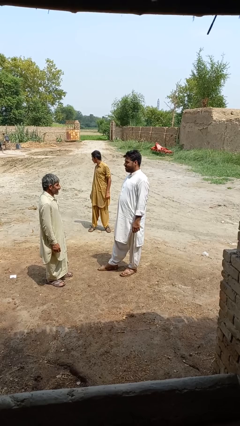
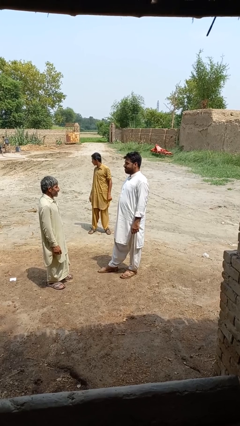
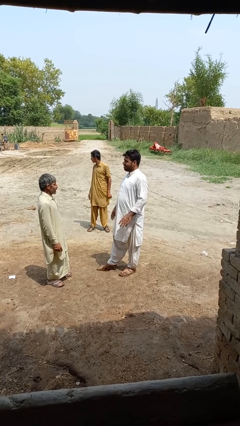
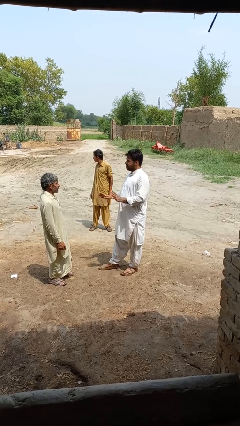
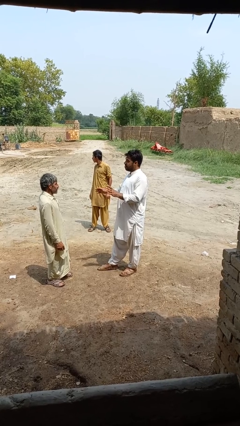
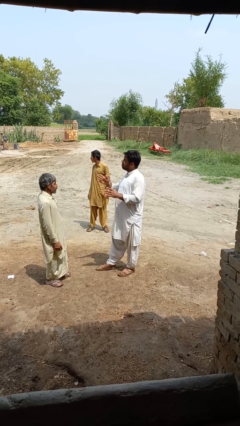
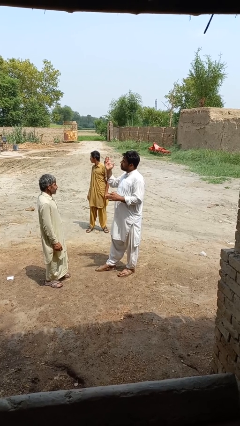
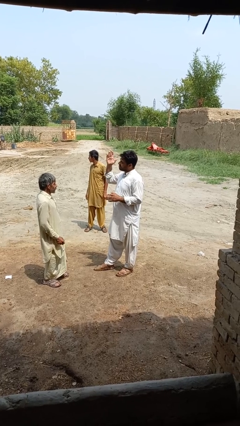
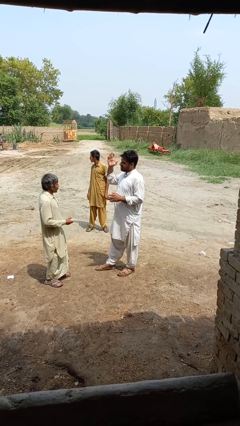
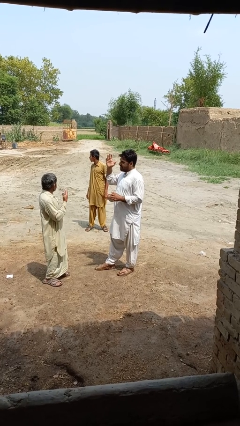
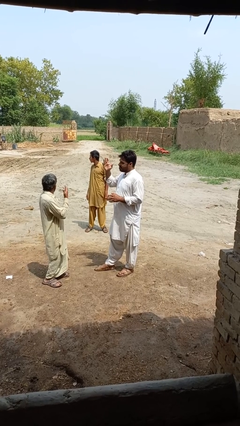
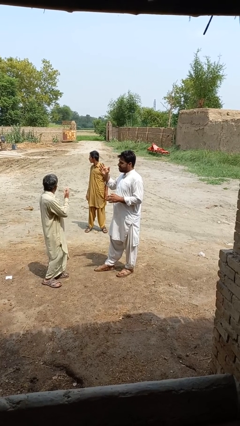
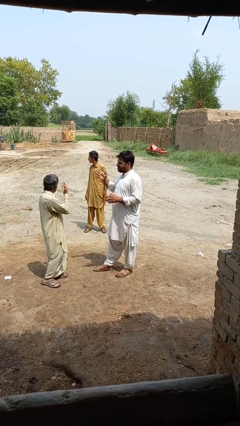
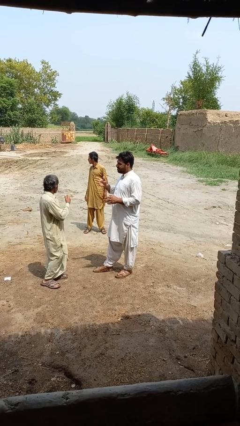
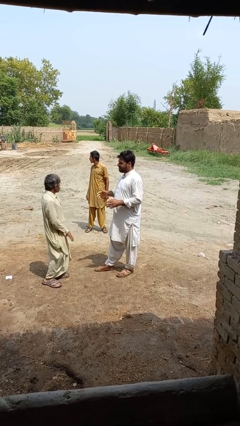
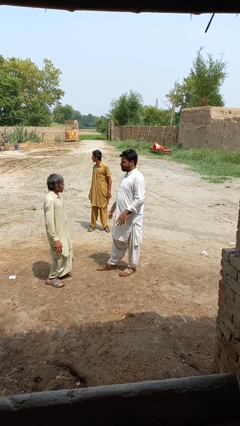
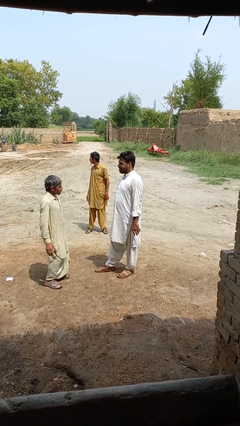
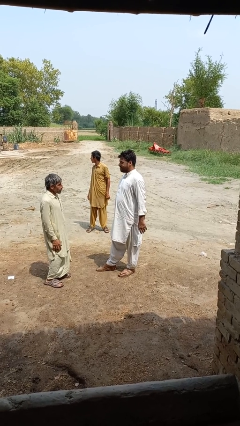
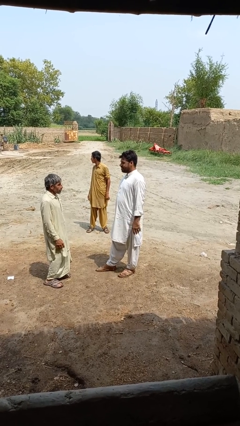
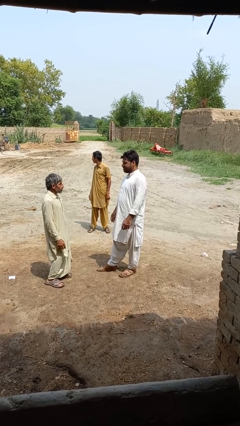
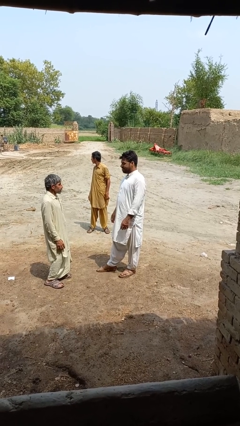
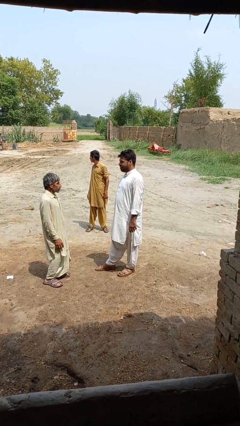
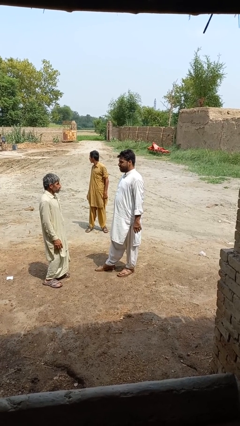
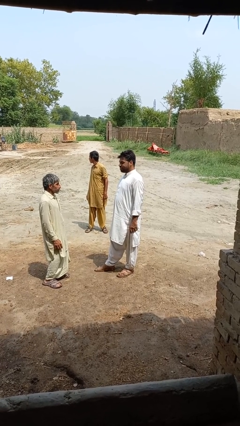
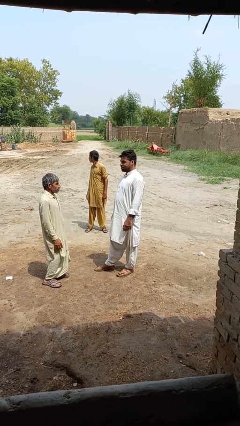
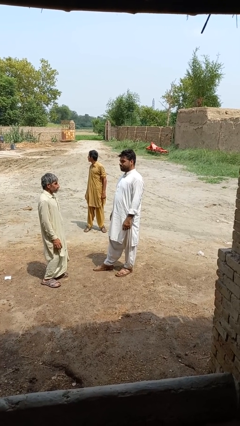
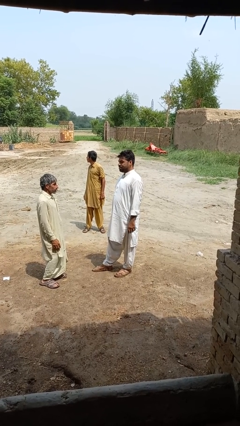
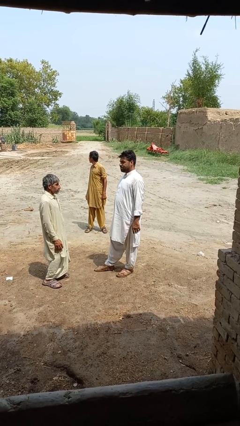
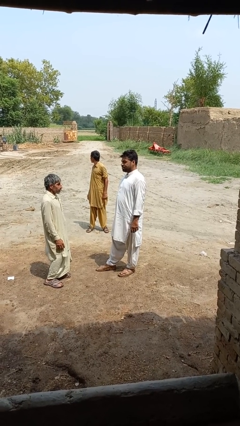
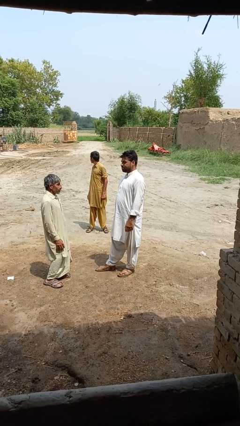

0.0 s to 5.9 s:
person talks to person

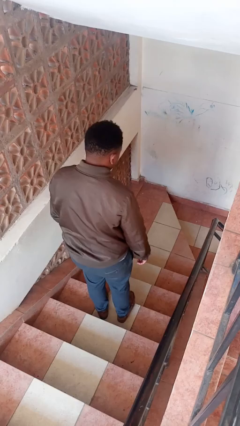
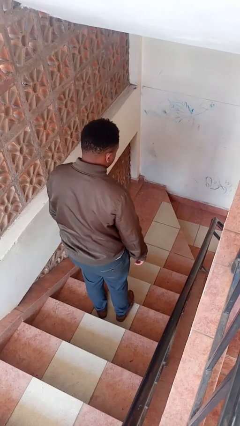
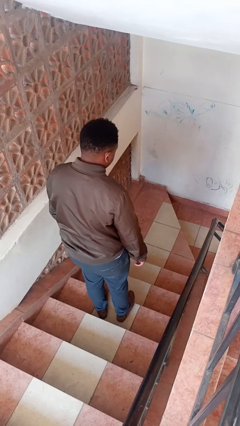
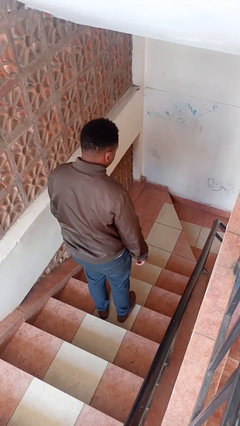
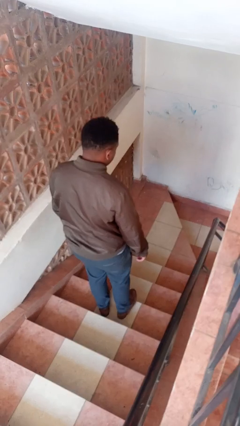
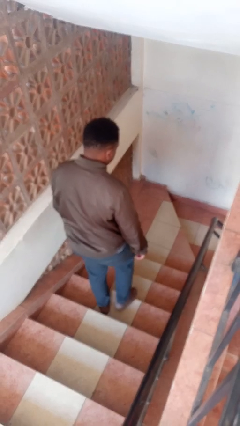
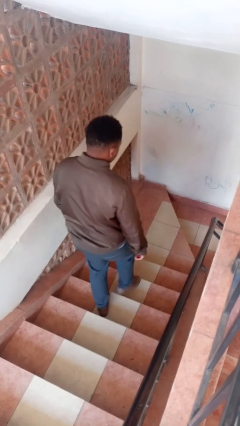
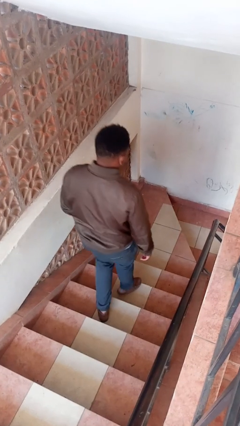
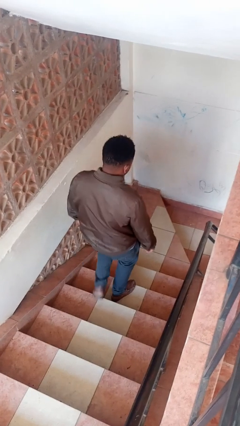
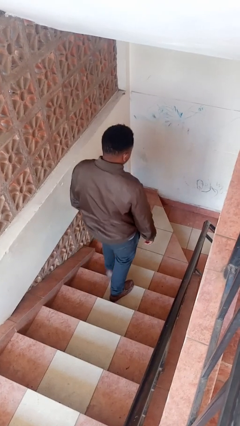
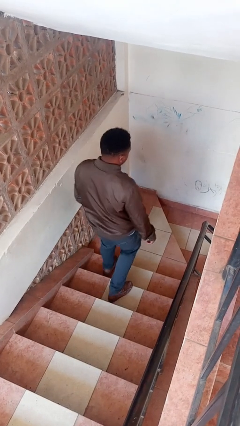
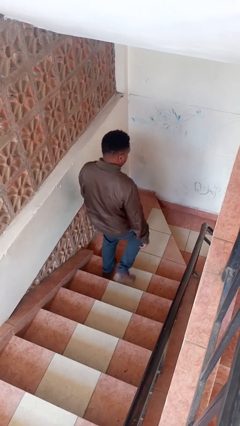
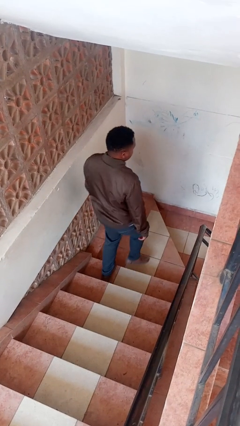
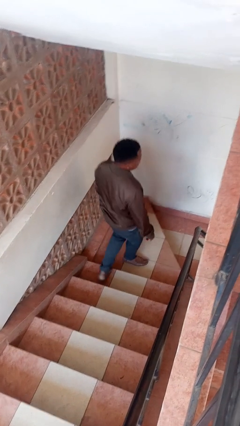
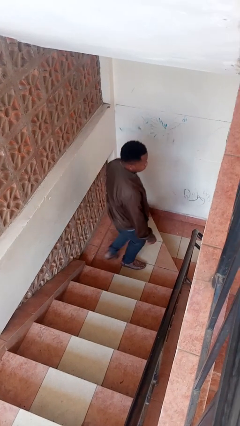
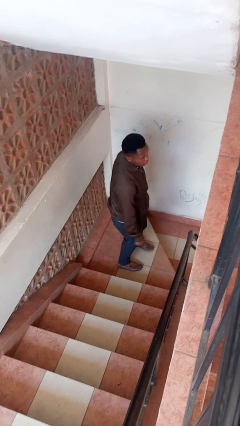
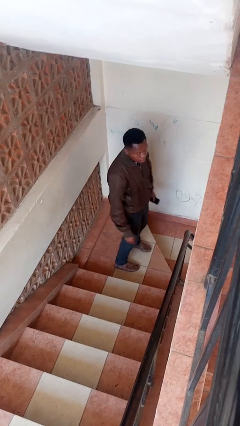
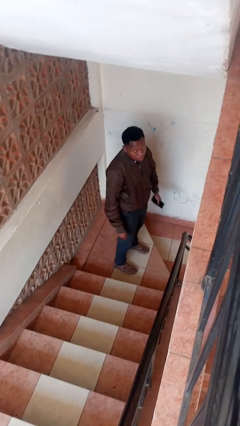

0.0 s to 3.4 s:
person climbs down stairs

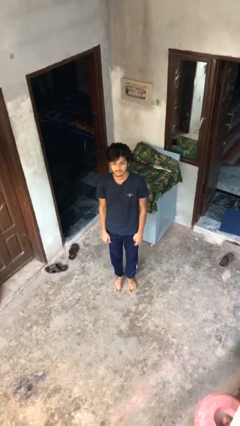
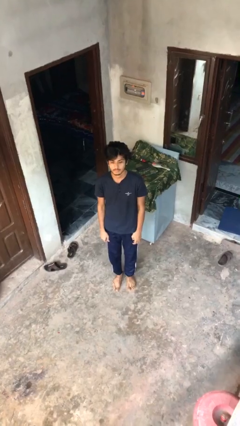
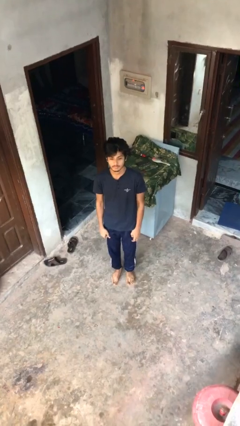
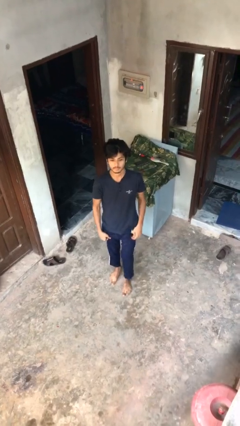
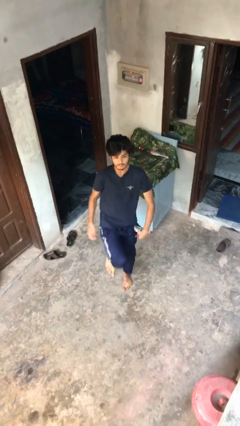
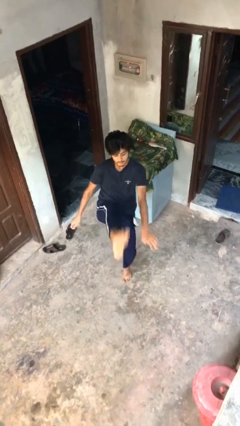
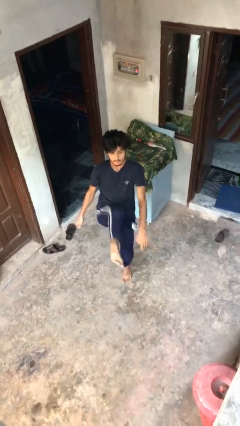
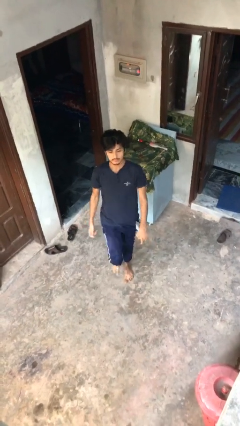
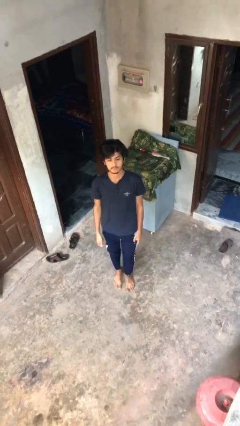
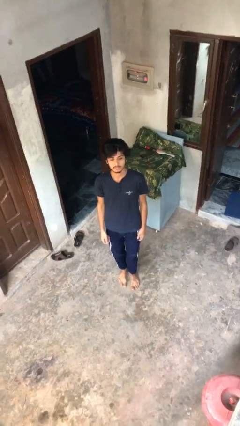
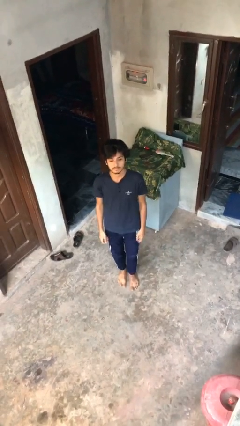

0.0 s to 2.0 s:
person karate kicks

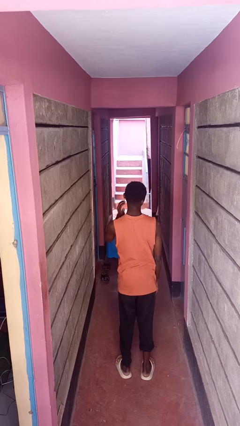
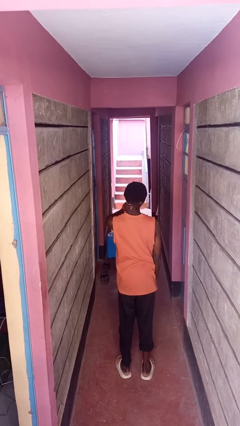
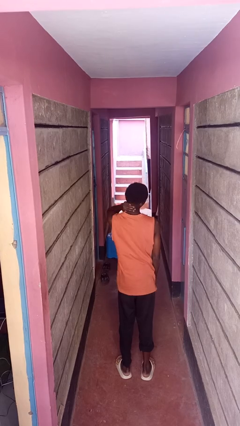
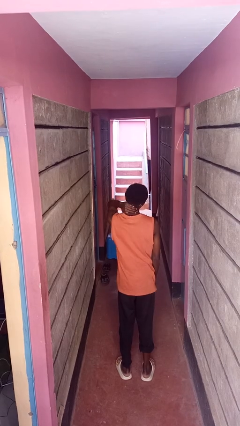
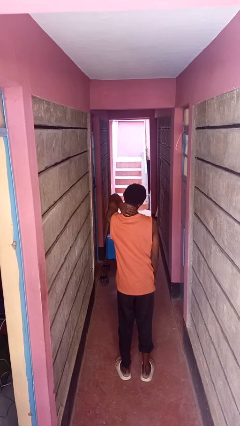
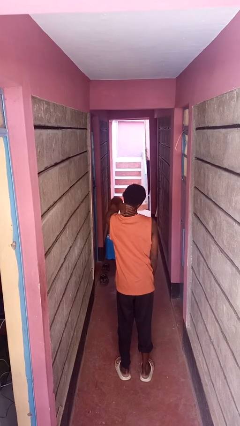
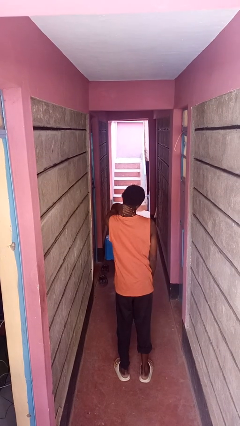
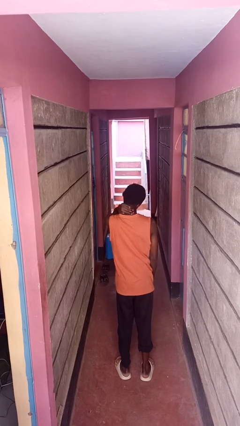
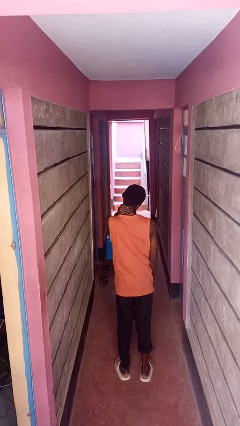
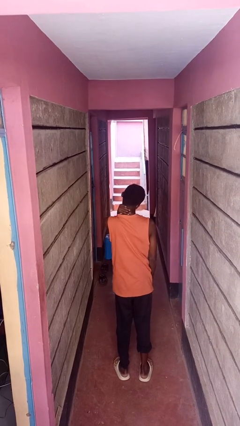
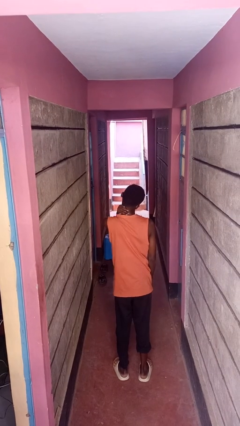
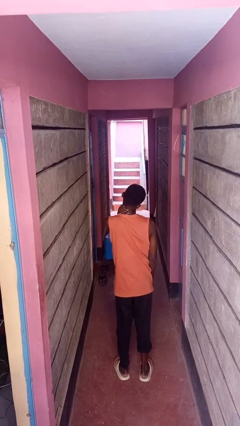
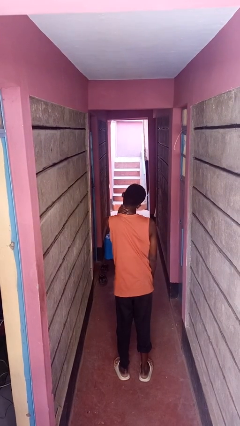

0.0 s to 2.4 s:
person rubs neck

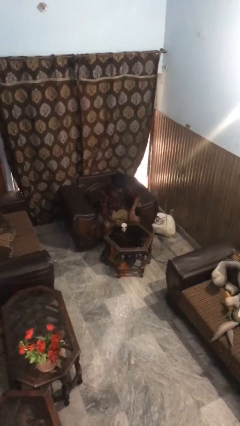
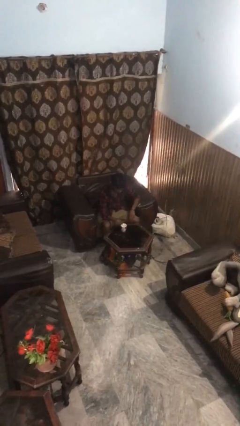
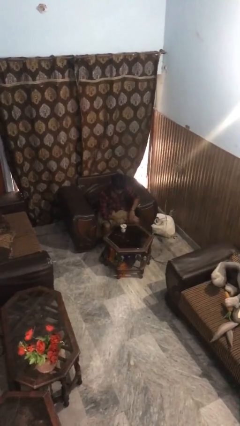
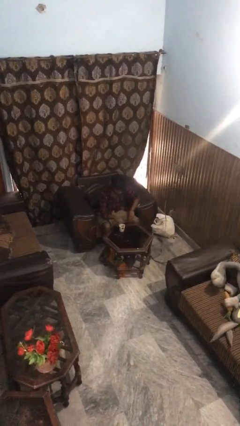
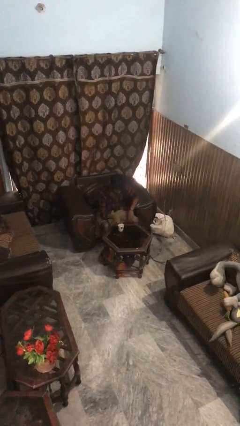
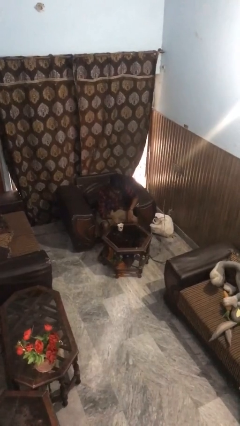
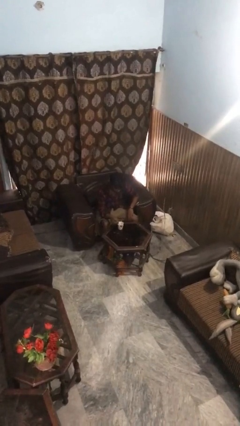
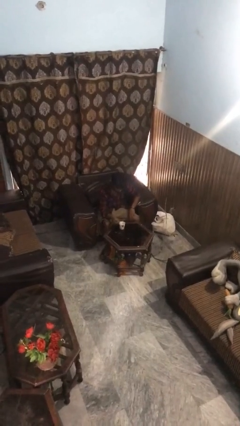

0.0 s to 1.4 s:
person stirs mug

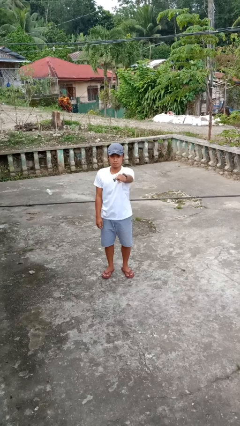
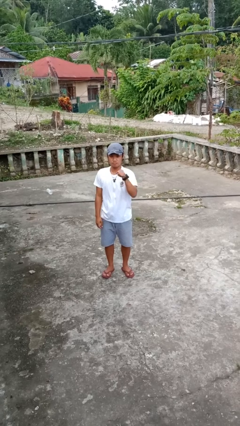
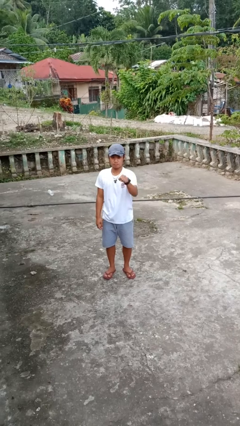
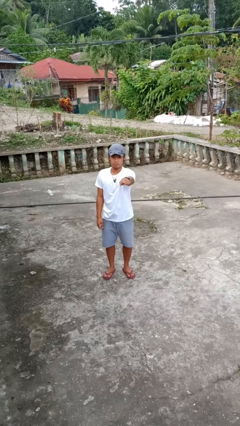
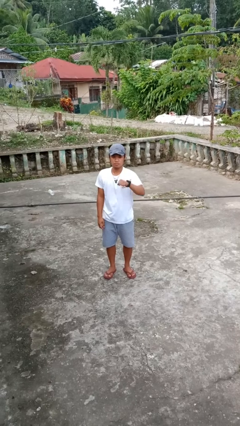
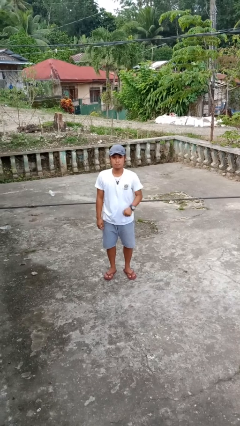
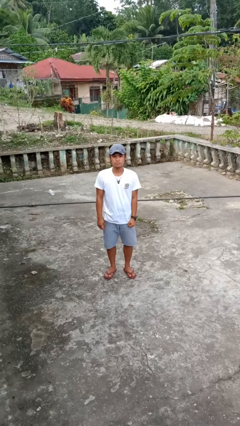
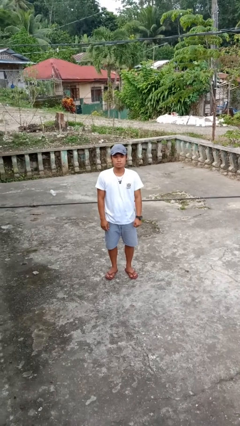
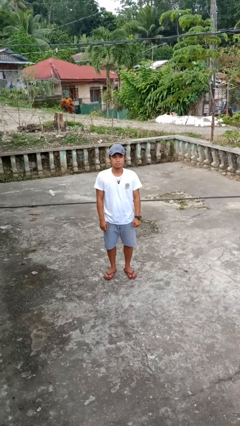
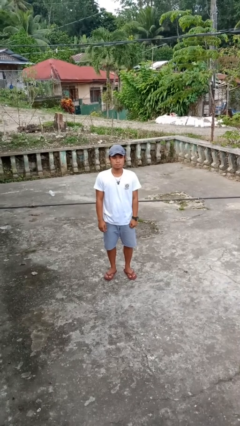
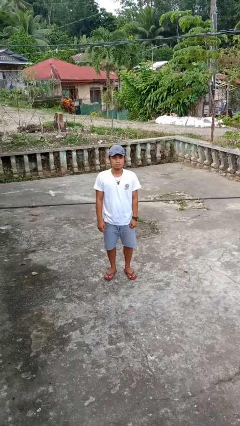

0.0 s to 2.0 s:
person punches

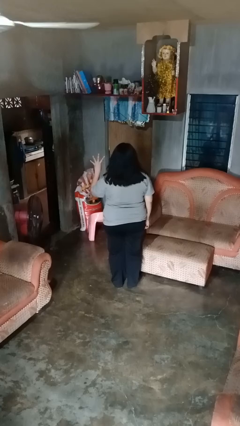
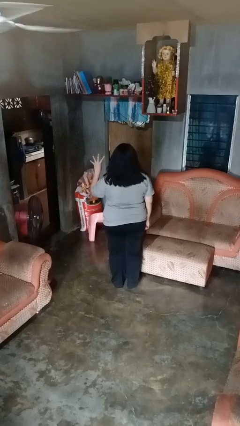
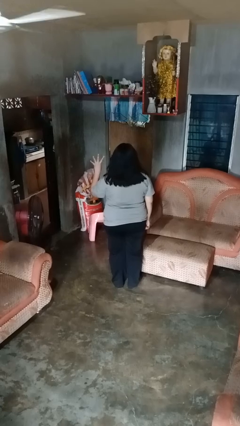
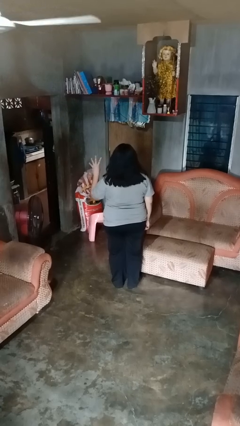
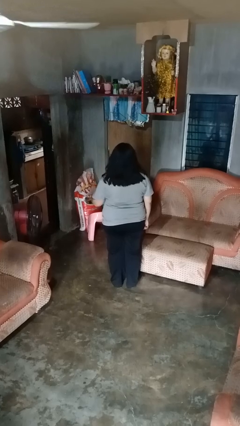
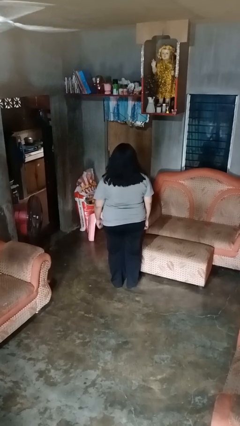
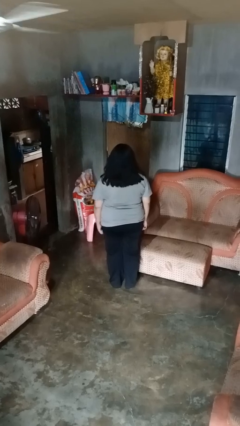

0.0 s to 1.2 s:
person gestures number four
